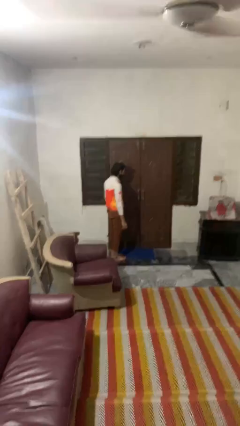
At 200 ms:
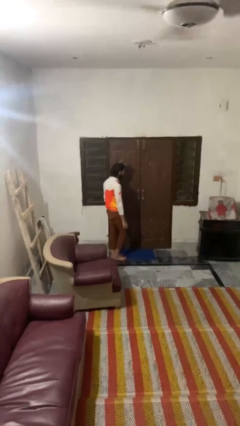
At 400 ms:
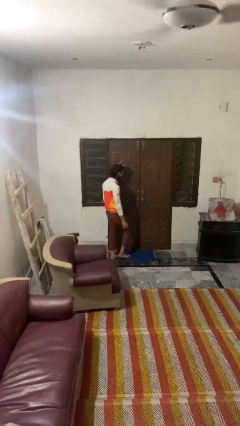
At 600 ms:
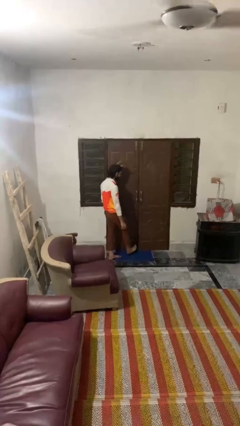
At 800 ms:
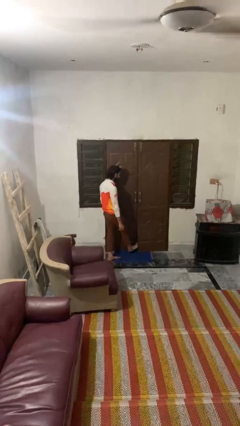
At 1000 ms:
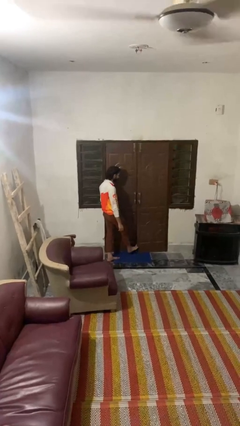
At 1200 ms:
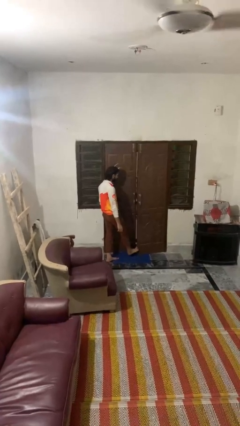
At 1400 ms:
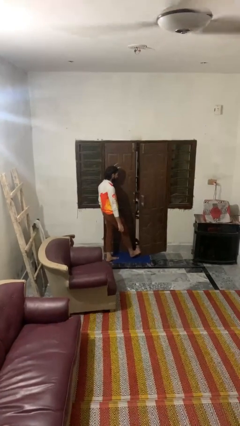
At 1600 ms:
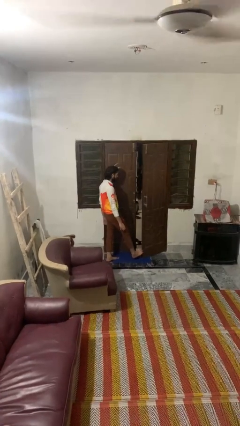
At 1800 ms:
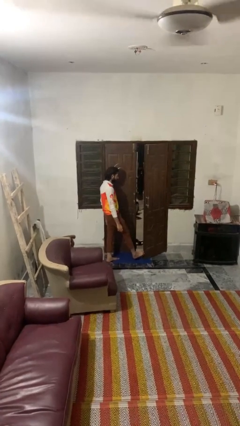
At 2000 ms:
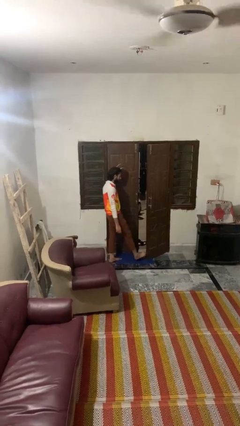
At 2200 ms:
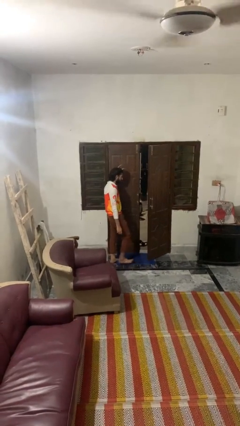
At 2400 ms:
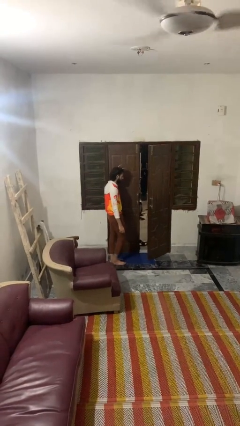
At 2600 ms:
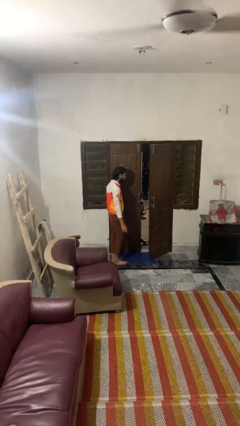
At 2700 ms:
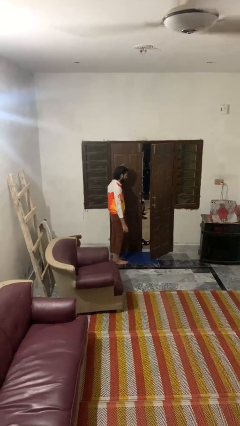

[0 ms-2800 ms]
person opens facility door

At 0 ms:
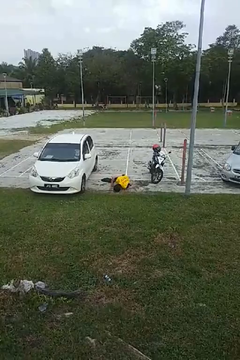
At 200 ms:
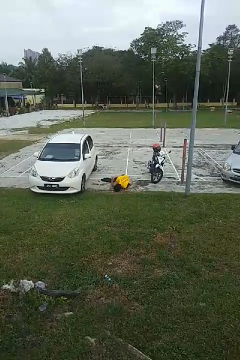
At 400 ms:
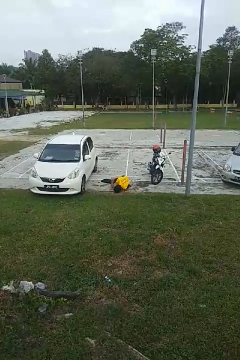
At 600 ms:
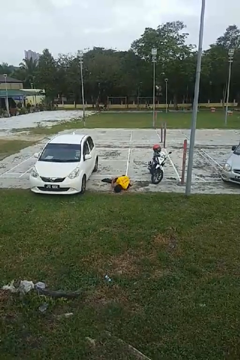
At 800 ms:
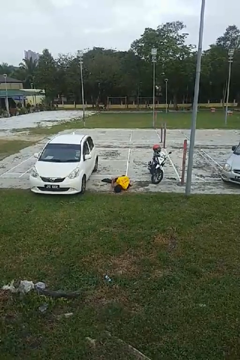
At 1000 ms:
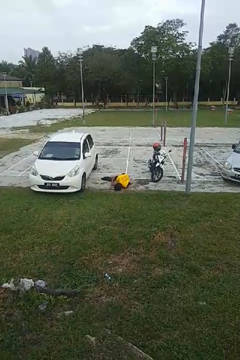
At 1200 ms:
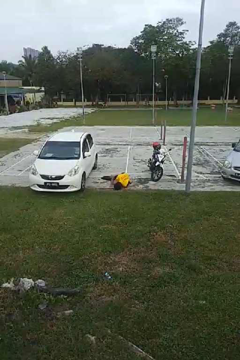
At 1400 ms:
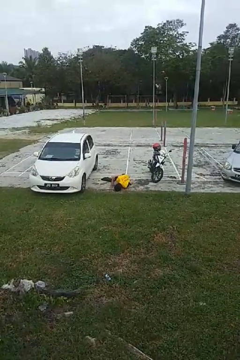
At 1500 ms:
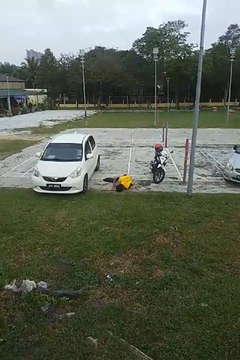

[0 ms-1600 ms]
person lies down on floor

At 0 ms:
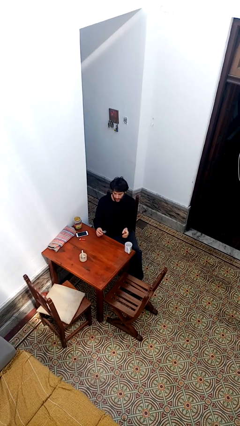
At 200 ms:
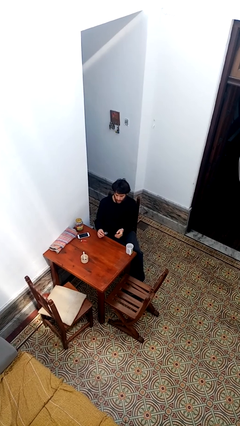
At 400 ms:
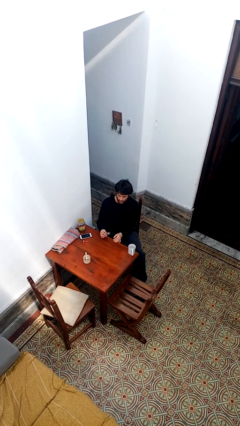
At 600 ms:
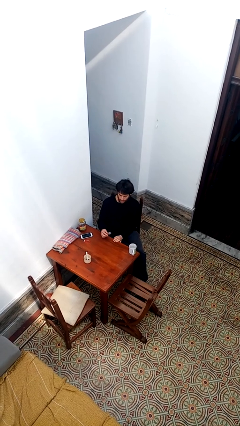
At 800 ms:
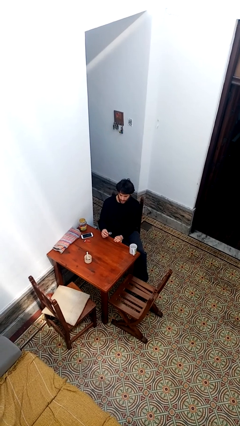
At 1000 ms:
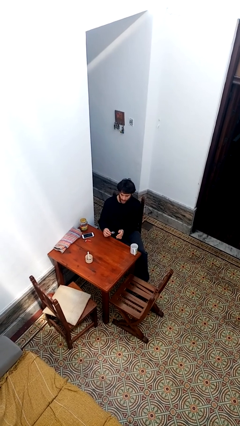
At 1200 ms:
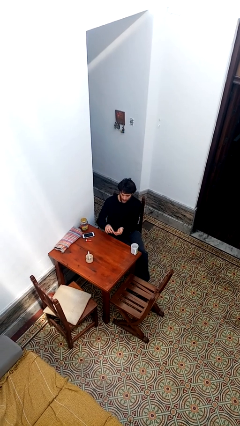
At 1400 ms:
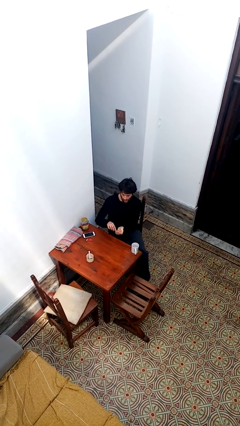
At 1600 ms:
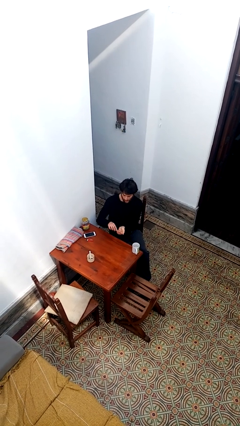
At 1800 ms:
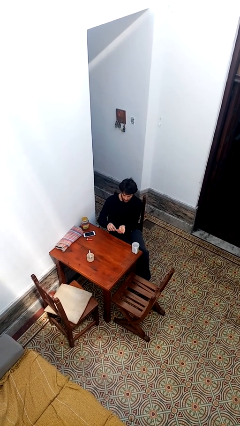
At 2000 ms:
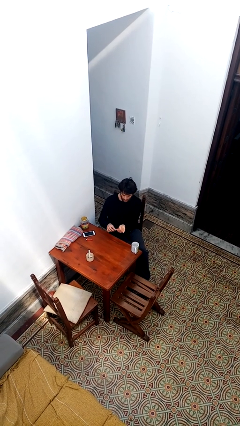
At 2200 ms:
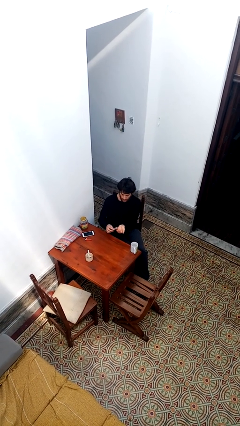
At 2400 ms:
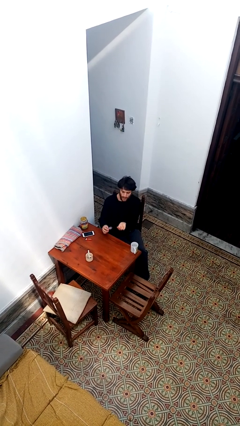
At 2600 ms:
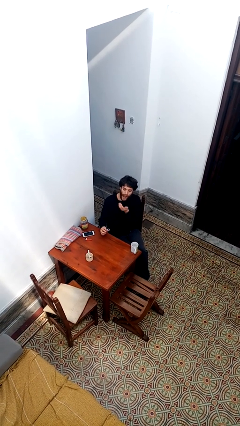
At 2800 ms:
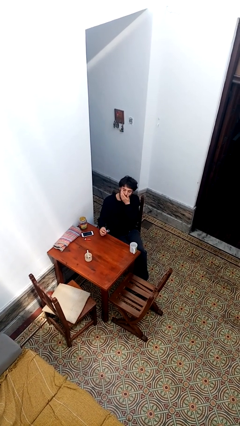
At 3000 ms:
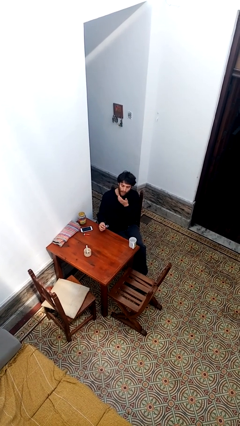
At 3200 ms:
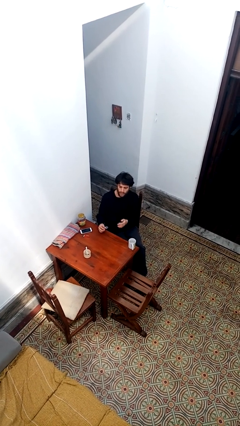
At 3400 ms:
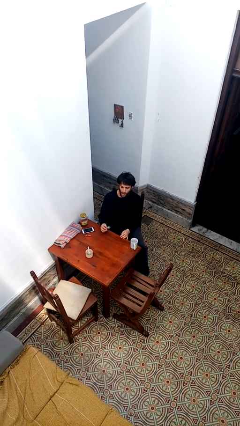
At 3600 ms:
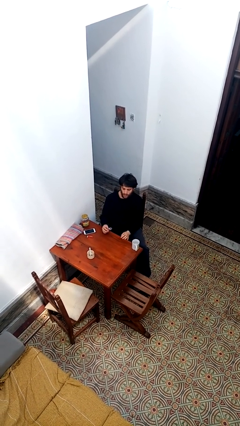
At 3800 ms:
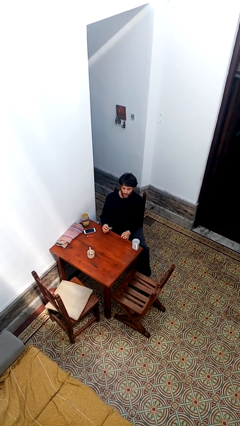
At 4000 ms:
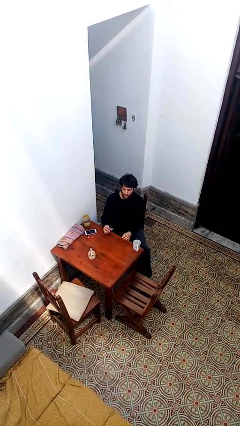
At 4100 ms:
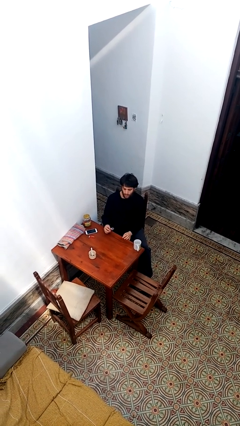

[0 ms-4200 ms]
person takes medicine pills

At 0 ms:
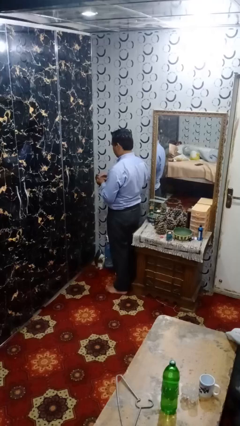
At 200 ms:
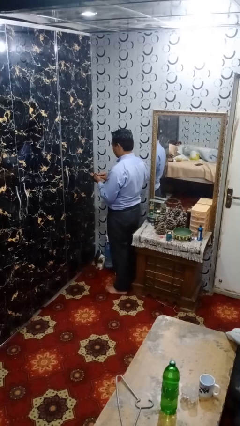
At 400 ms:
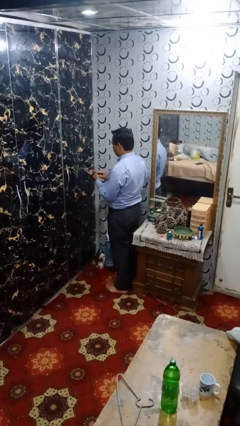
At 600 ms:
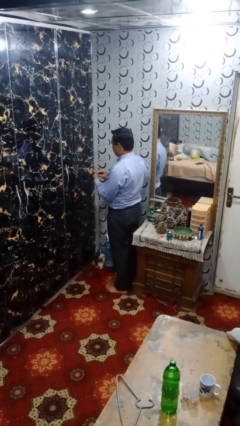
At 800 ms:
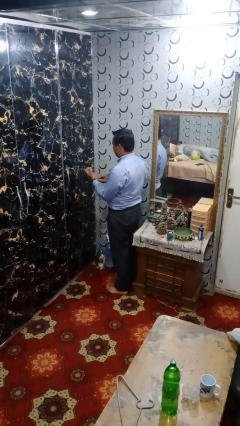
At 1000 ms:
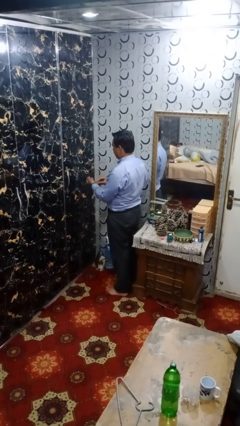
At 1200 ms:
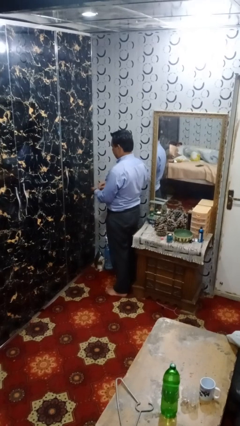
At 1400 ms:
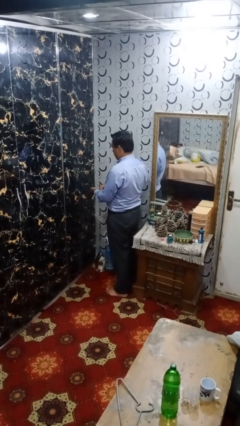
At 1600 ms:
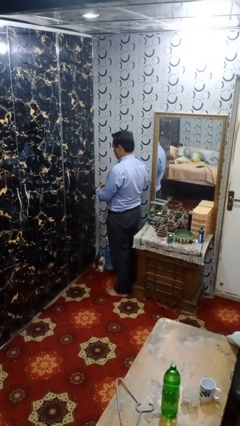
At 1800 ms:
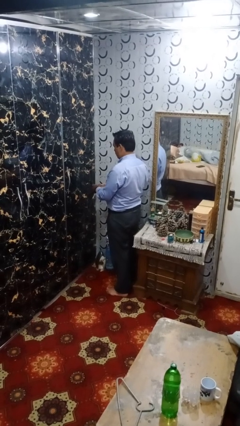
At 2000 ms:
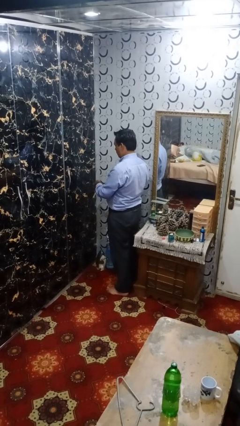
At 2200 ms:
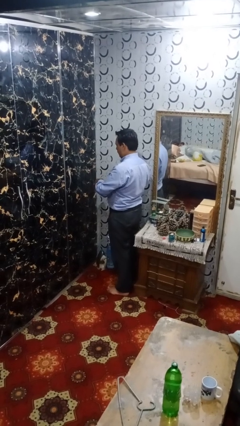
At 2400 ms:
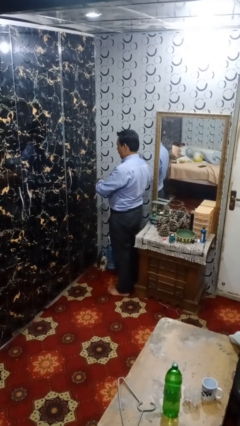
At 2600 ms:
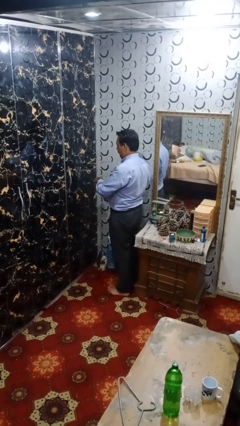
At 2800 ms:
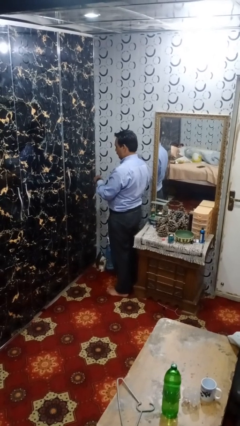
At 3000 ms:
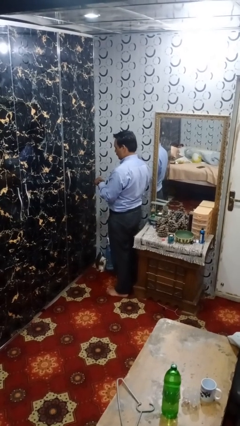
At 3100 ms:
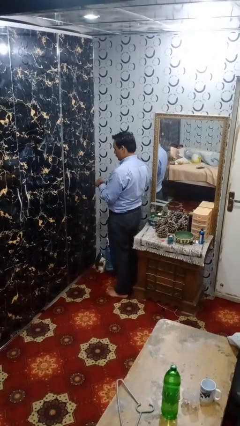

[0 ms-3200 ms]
person puts on wristwatch

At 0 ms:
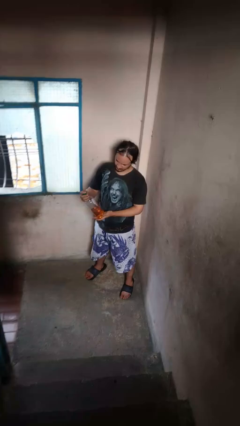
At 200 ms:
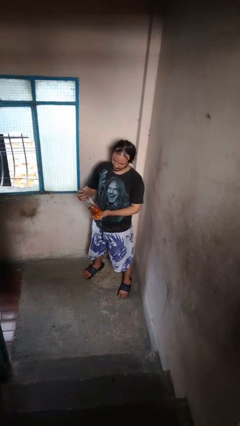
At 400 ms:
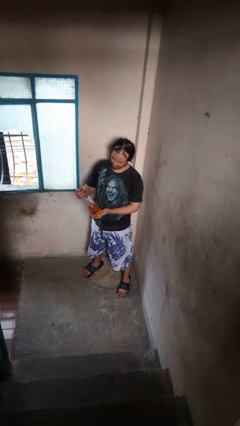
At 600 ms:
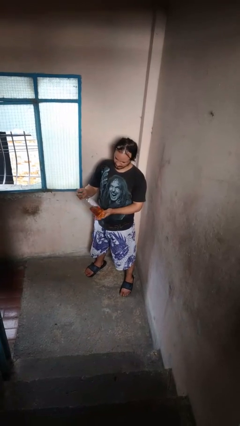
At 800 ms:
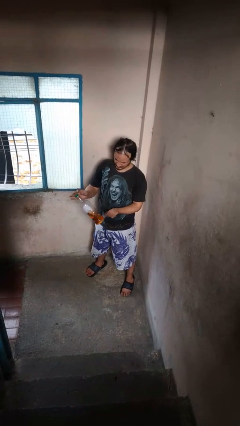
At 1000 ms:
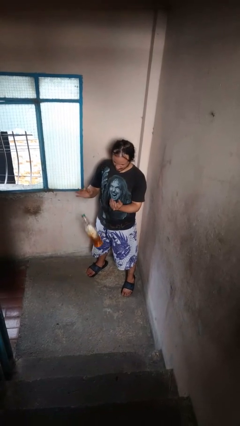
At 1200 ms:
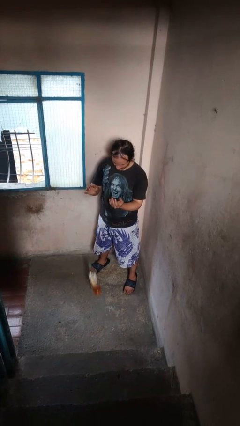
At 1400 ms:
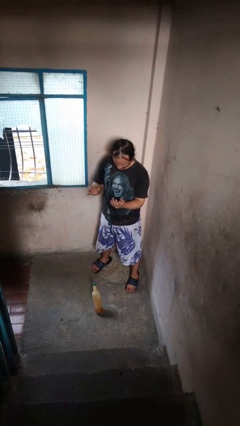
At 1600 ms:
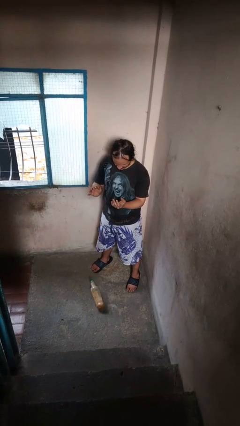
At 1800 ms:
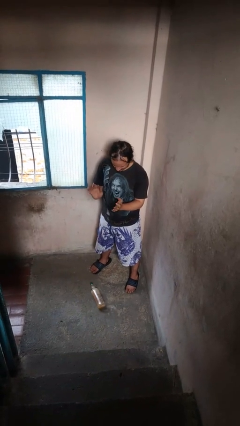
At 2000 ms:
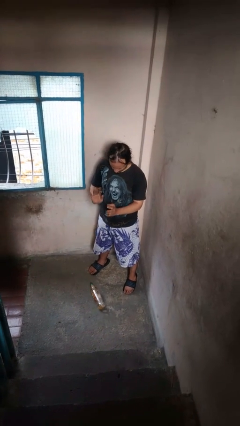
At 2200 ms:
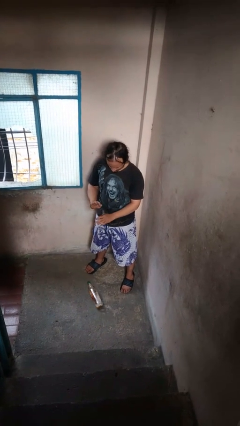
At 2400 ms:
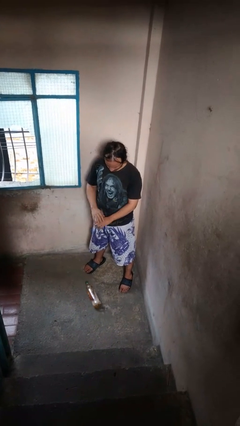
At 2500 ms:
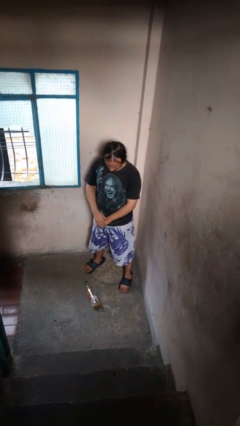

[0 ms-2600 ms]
person drops object

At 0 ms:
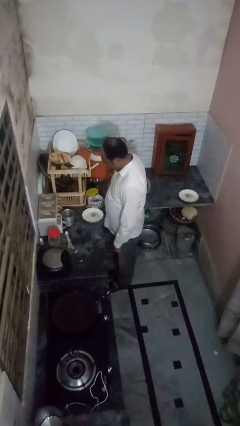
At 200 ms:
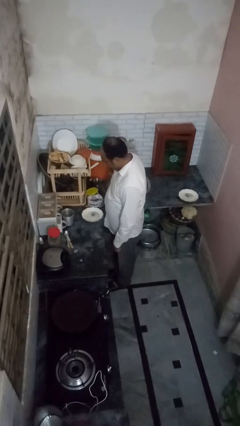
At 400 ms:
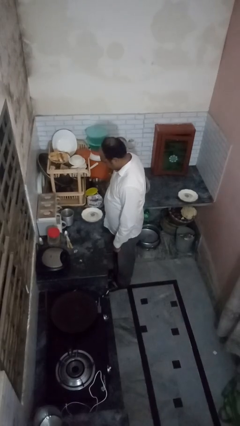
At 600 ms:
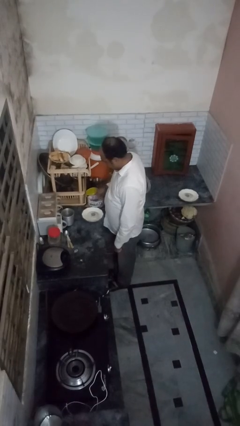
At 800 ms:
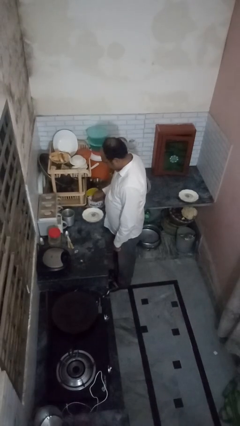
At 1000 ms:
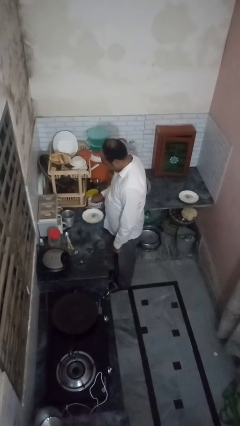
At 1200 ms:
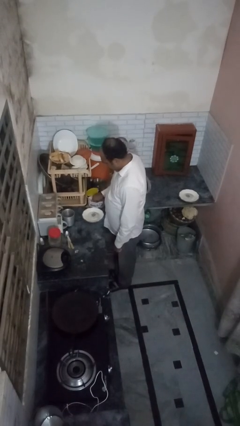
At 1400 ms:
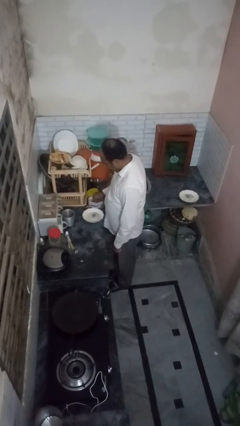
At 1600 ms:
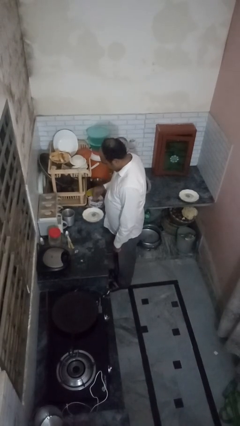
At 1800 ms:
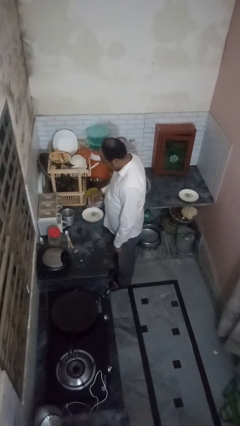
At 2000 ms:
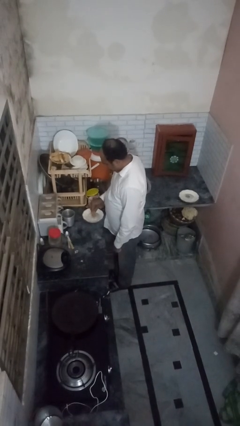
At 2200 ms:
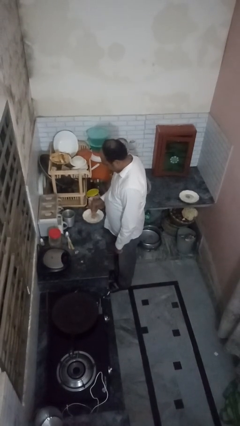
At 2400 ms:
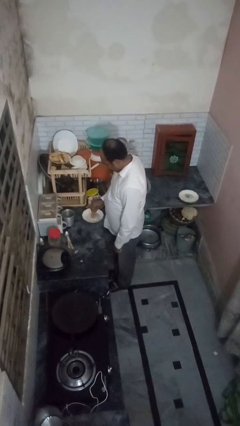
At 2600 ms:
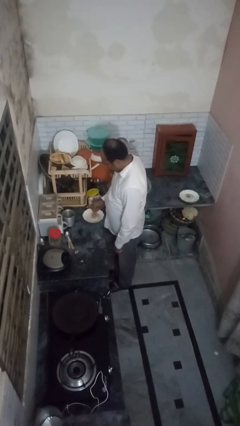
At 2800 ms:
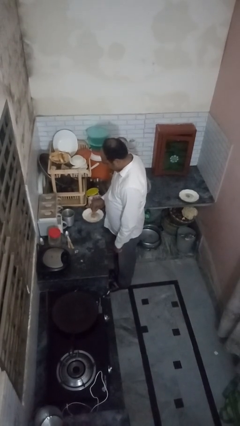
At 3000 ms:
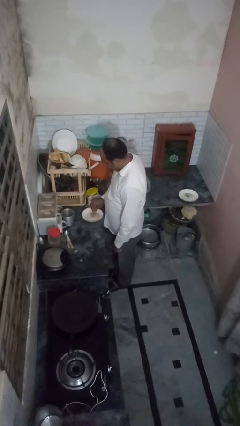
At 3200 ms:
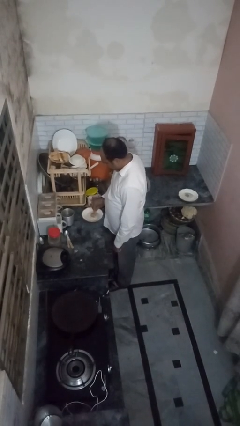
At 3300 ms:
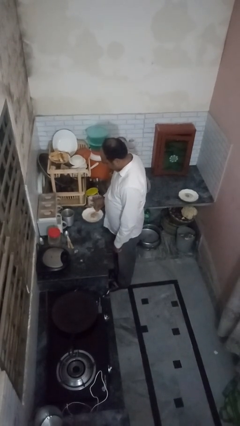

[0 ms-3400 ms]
person pours into bowl
